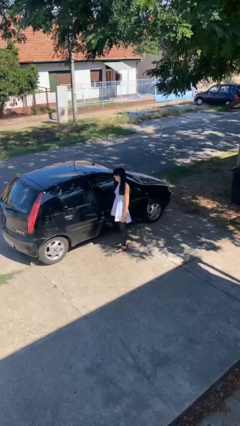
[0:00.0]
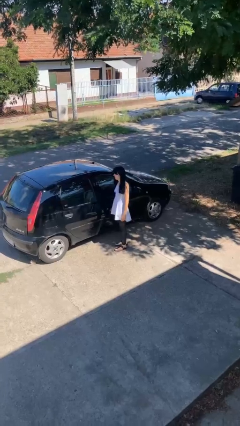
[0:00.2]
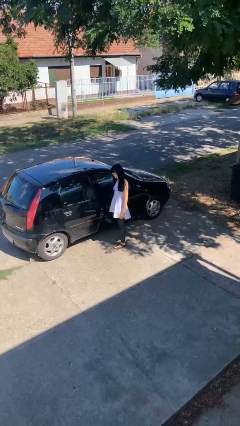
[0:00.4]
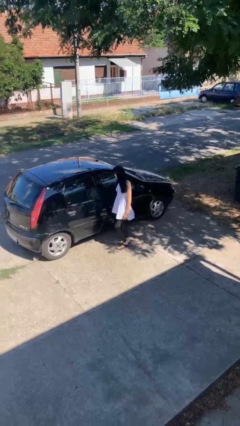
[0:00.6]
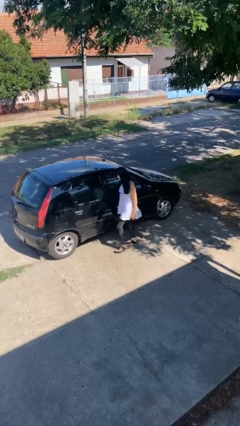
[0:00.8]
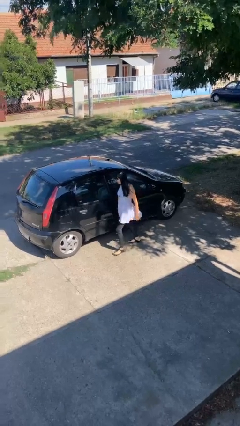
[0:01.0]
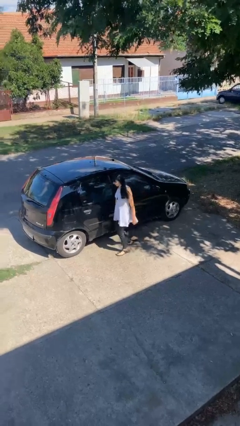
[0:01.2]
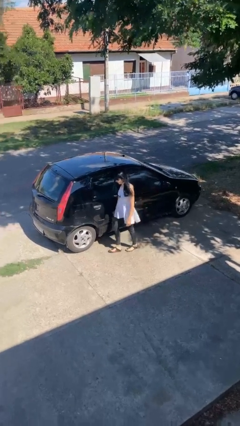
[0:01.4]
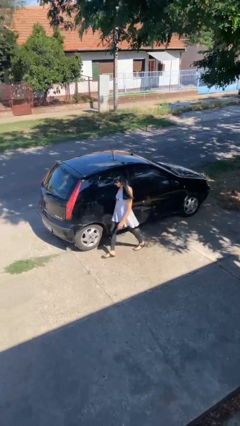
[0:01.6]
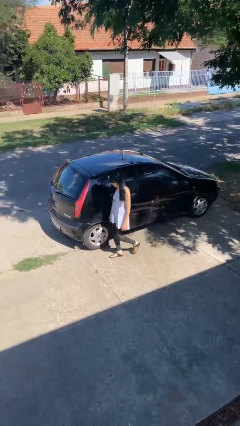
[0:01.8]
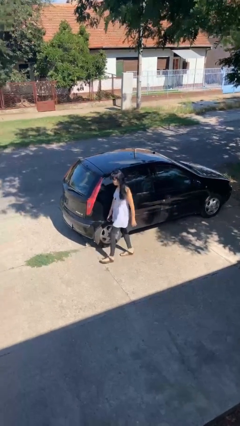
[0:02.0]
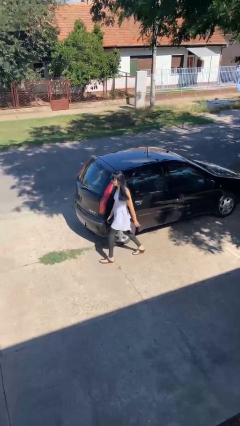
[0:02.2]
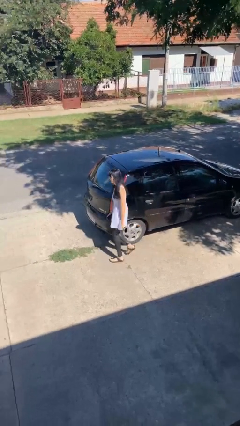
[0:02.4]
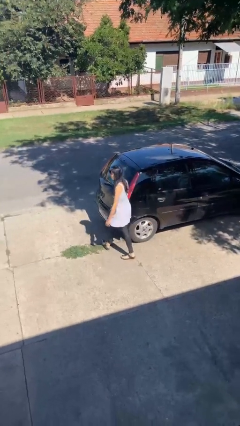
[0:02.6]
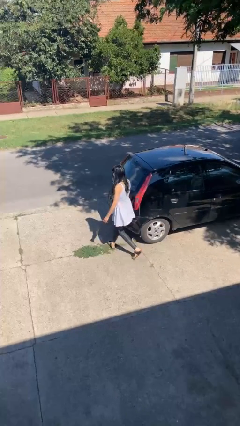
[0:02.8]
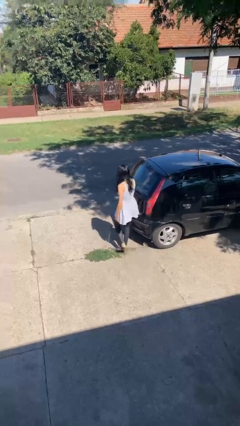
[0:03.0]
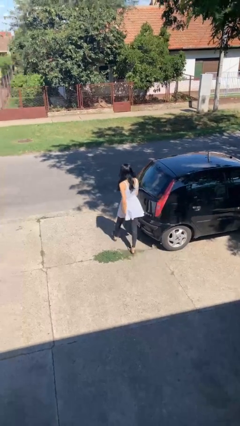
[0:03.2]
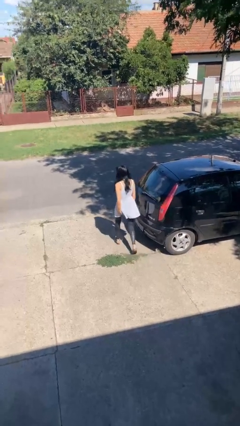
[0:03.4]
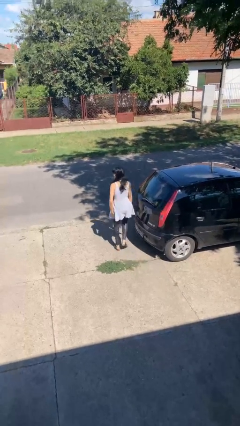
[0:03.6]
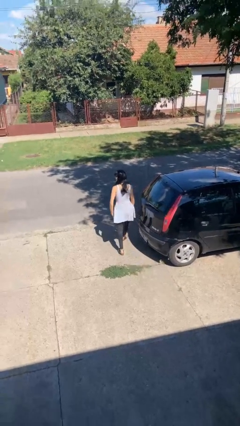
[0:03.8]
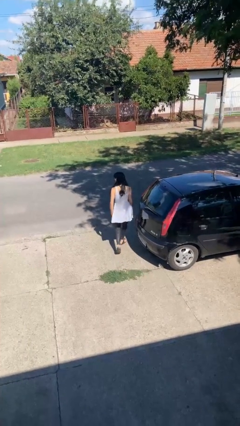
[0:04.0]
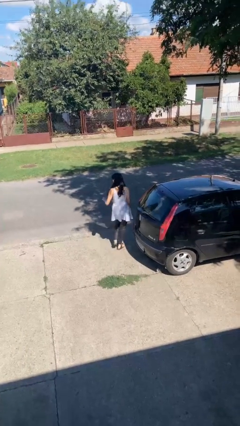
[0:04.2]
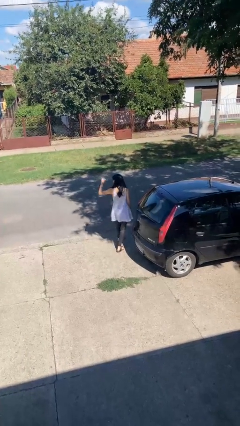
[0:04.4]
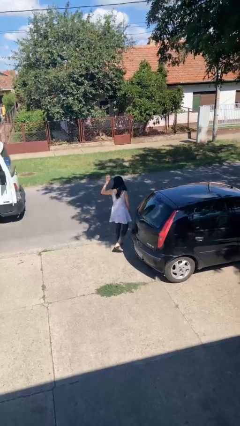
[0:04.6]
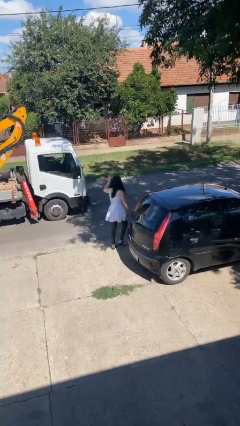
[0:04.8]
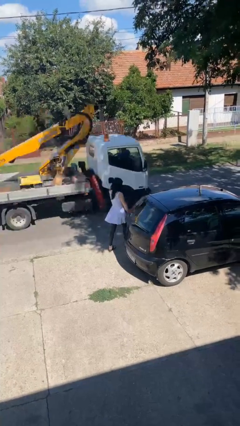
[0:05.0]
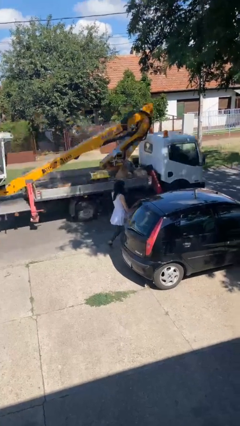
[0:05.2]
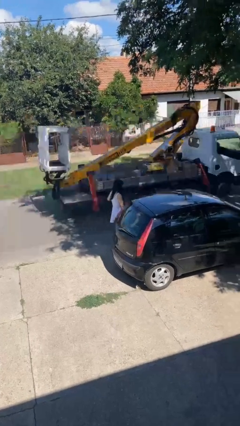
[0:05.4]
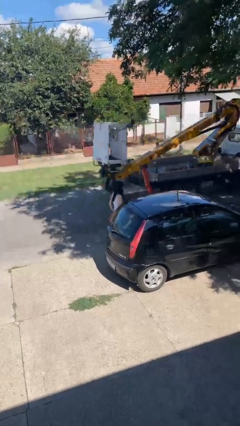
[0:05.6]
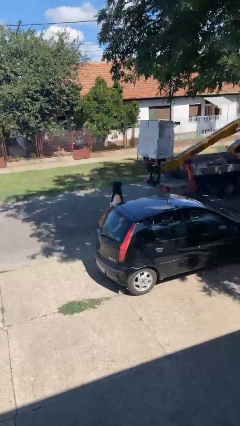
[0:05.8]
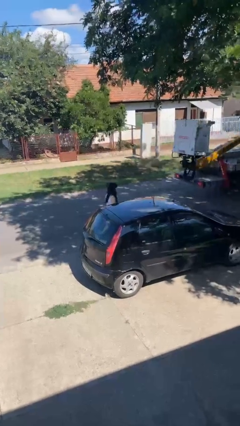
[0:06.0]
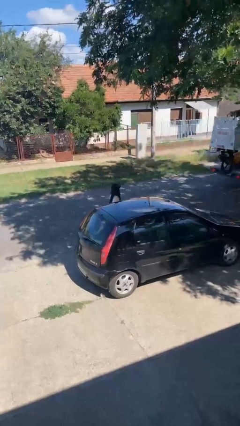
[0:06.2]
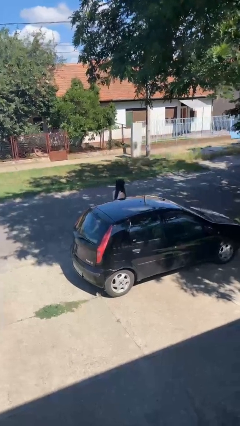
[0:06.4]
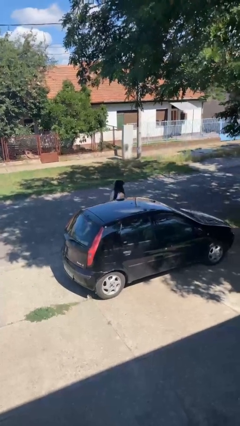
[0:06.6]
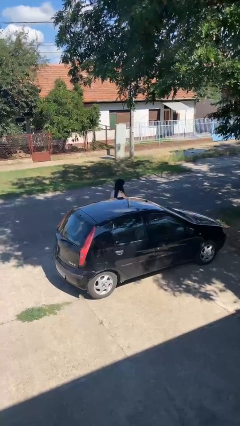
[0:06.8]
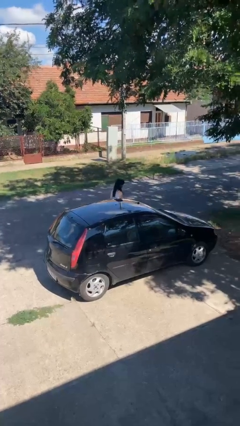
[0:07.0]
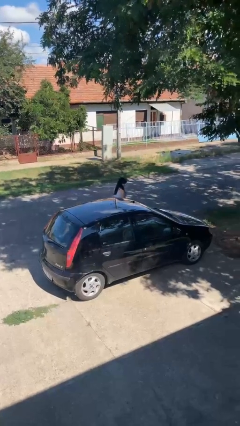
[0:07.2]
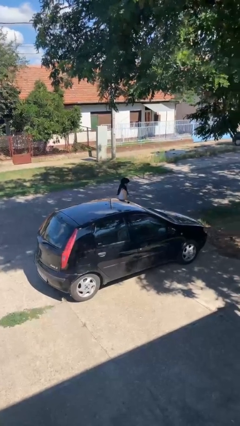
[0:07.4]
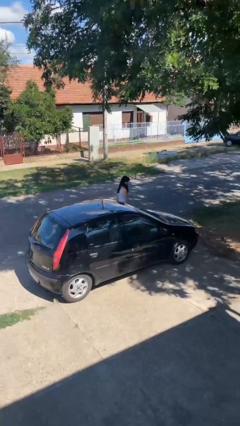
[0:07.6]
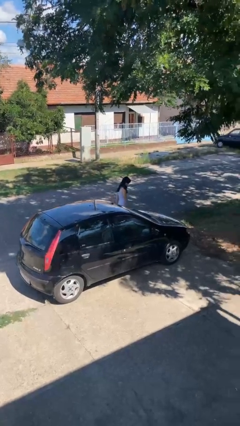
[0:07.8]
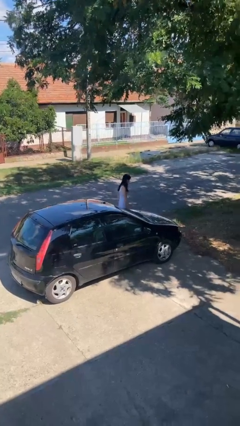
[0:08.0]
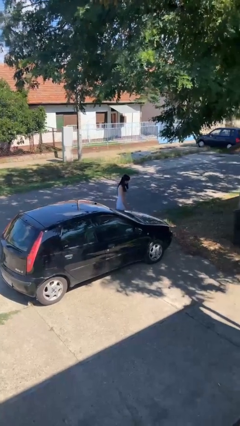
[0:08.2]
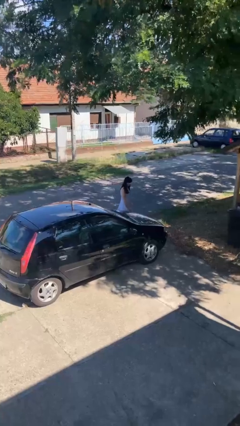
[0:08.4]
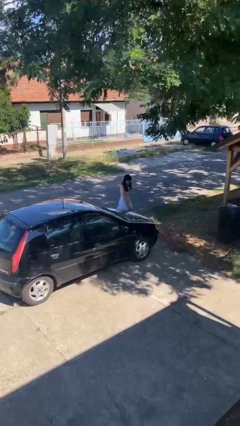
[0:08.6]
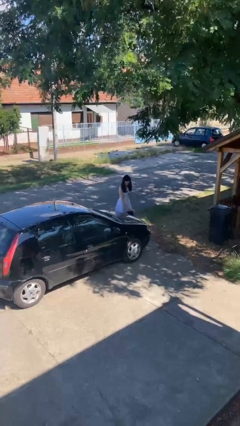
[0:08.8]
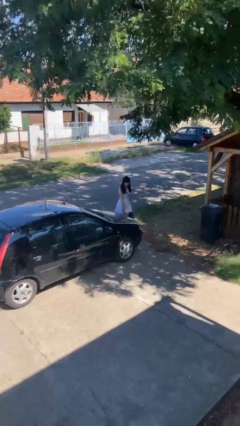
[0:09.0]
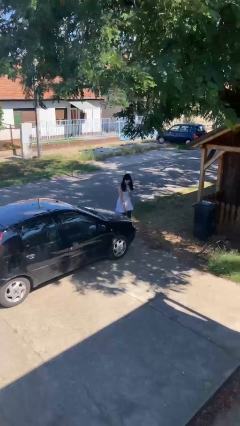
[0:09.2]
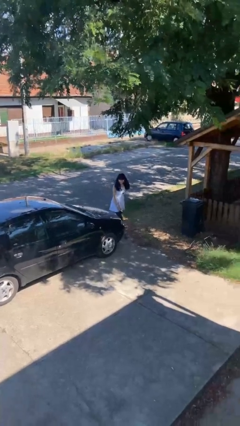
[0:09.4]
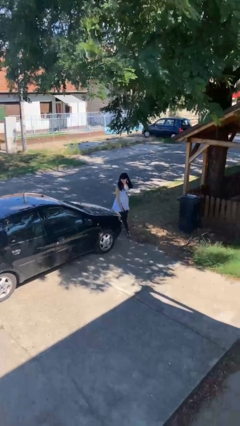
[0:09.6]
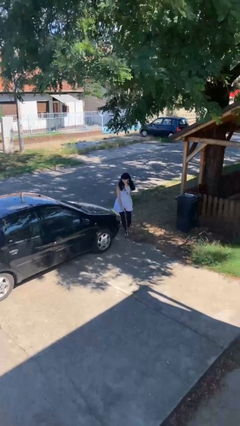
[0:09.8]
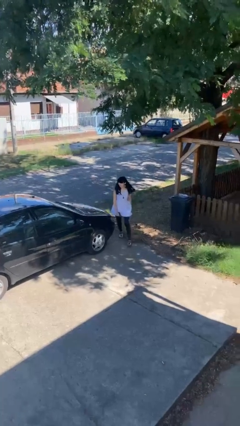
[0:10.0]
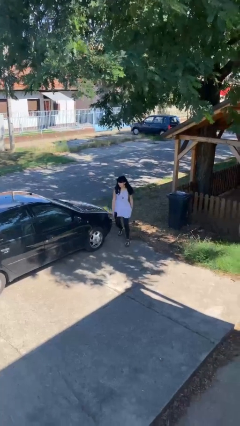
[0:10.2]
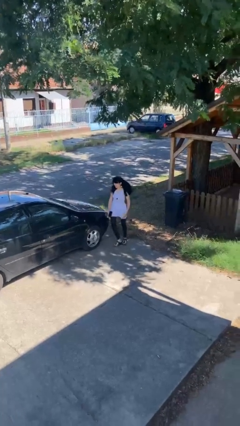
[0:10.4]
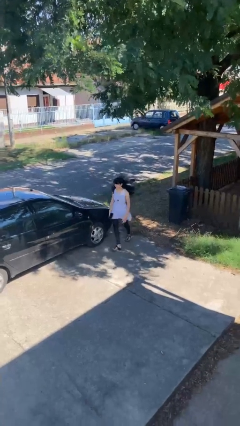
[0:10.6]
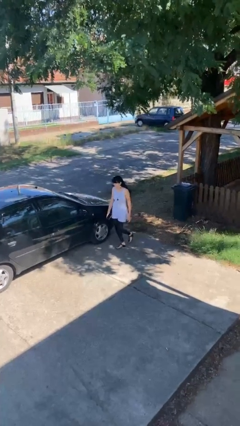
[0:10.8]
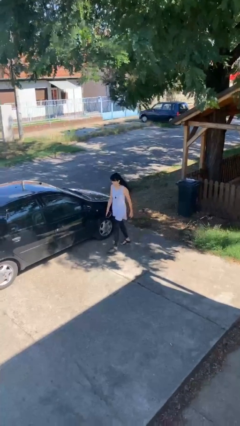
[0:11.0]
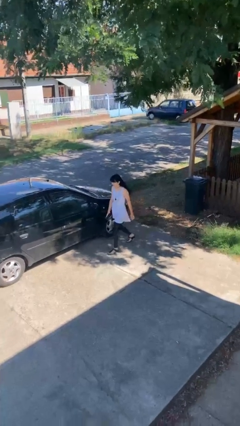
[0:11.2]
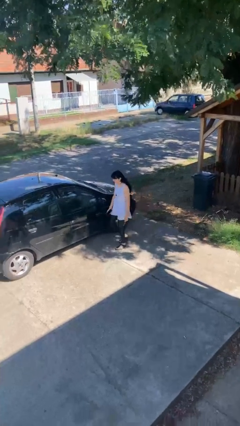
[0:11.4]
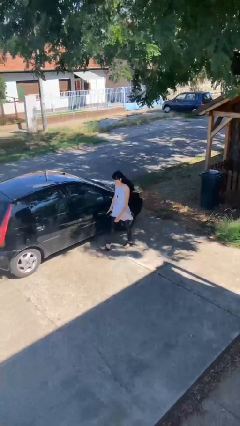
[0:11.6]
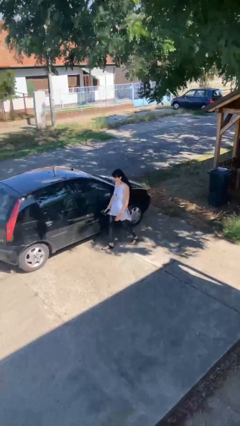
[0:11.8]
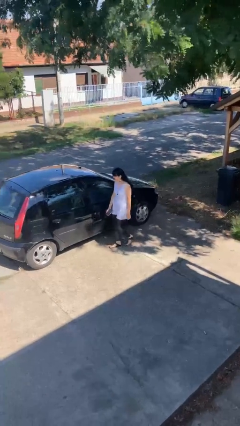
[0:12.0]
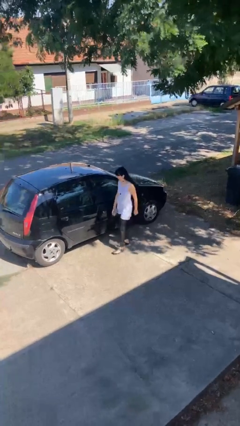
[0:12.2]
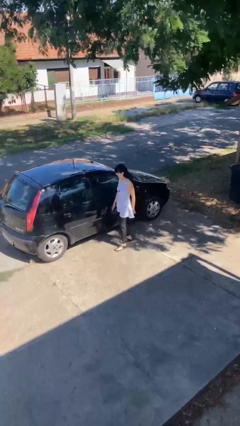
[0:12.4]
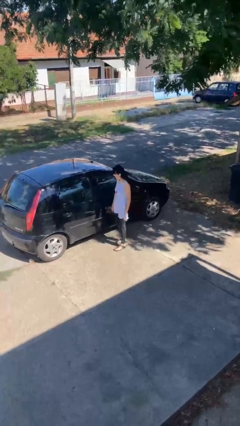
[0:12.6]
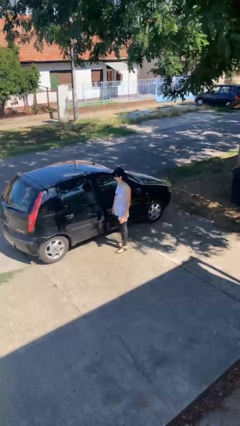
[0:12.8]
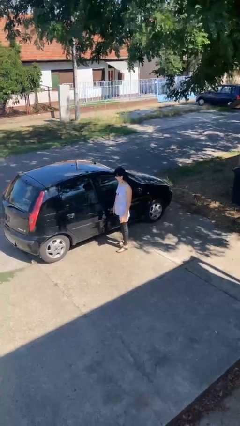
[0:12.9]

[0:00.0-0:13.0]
person walks around car

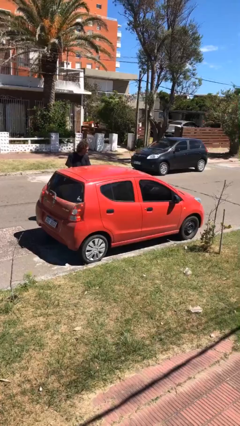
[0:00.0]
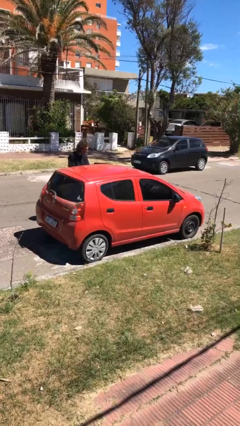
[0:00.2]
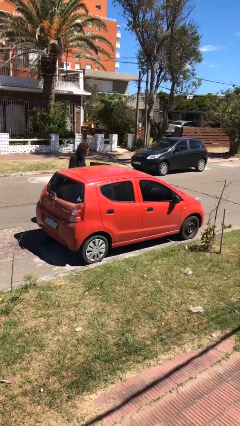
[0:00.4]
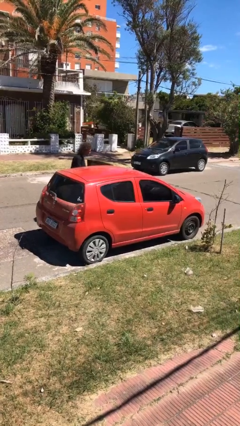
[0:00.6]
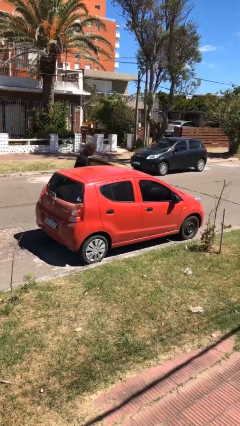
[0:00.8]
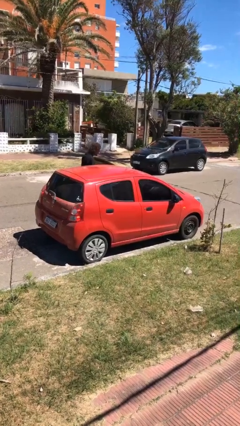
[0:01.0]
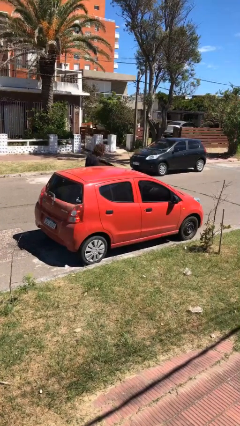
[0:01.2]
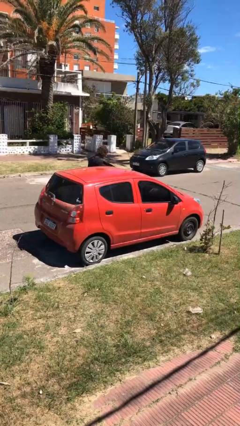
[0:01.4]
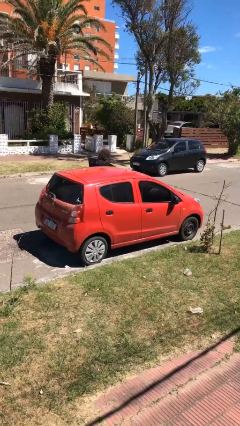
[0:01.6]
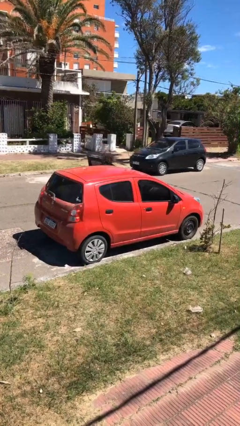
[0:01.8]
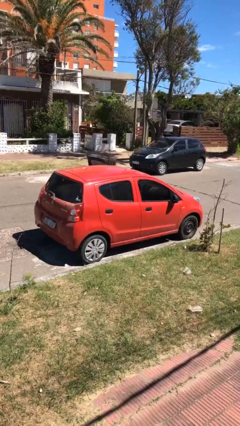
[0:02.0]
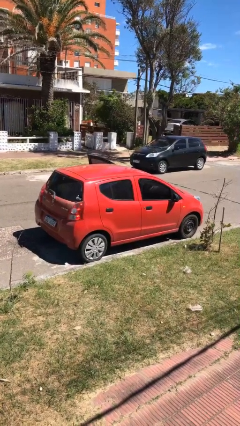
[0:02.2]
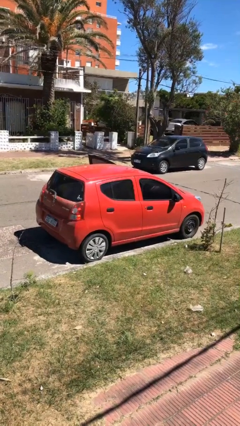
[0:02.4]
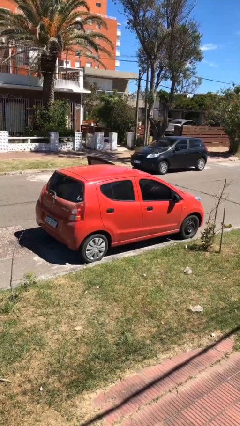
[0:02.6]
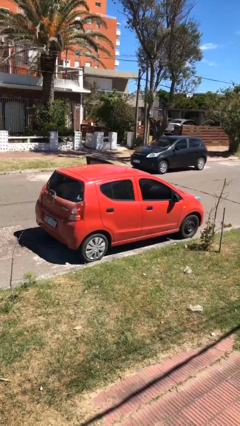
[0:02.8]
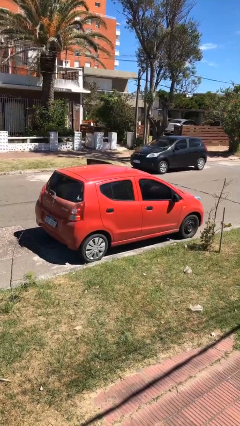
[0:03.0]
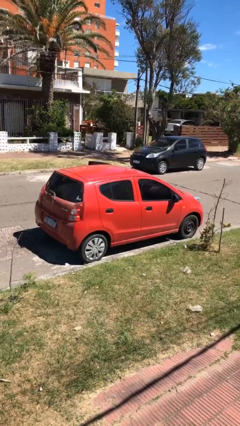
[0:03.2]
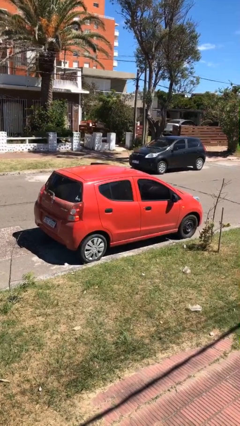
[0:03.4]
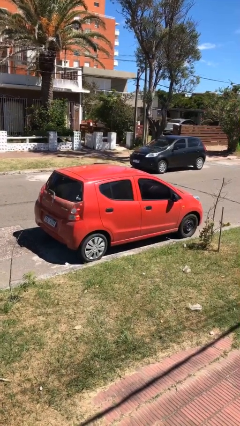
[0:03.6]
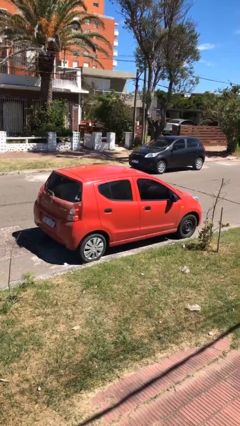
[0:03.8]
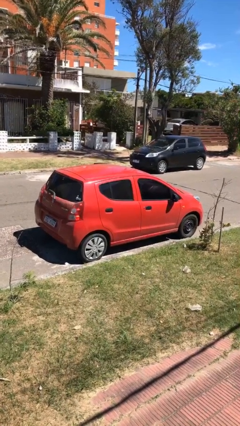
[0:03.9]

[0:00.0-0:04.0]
car picks up person

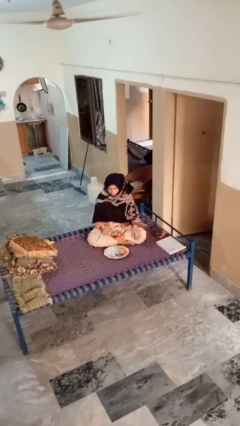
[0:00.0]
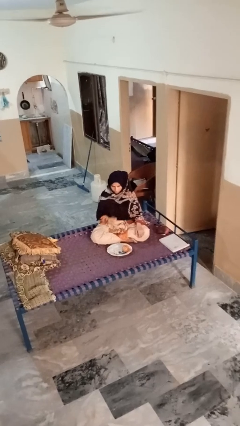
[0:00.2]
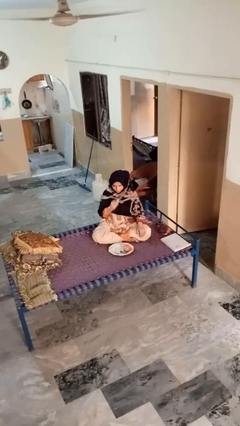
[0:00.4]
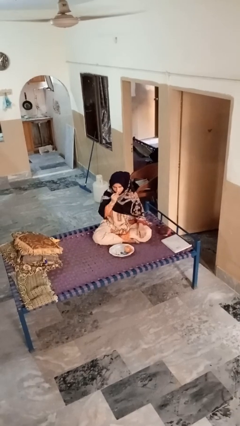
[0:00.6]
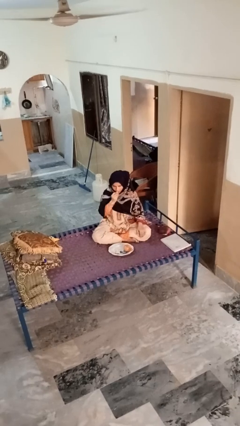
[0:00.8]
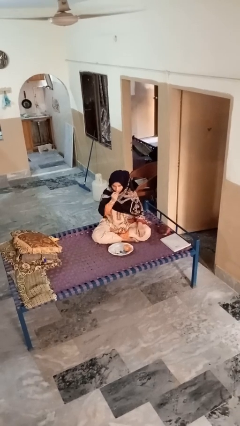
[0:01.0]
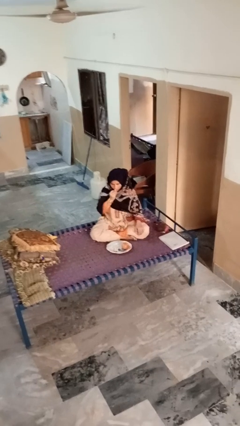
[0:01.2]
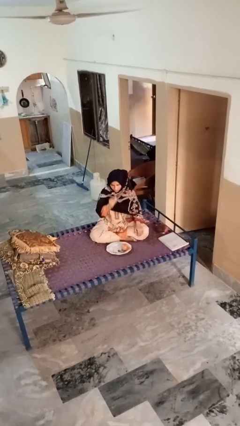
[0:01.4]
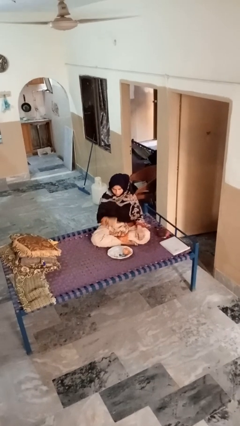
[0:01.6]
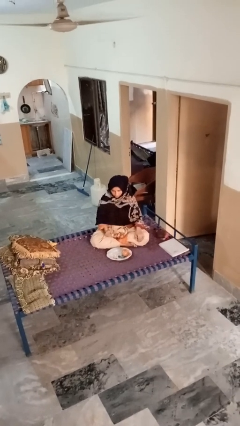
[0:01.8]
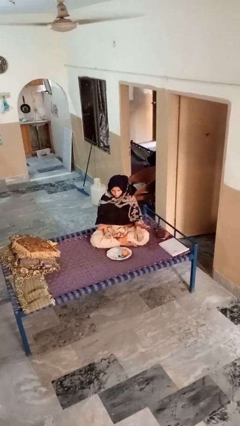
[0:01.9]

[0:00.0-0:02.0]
person eats apple
